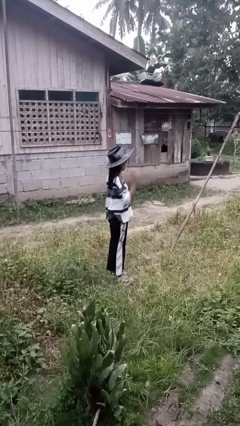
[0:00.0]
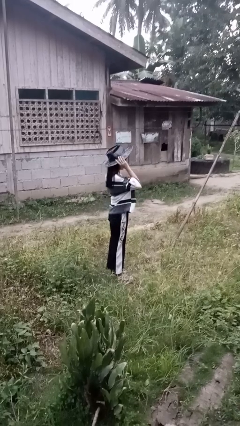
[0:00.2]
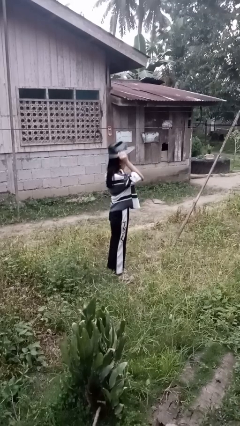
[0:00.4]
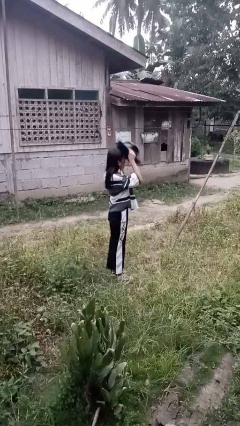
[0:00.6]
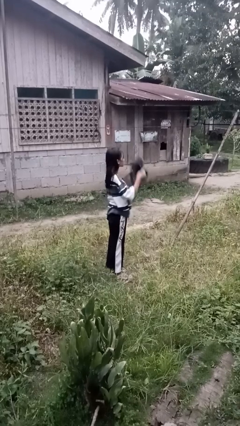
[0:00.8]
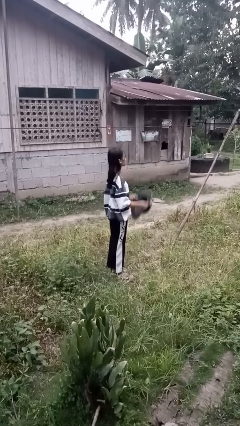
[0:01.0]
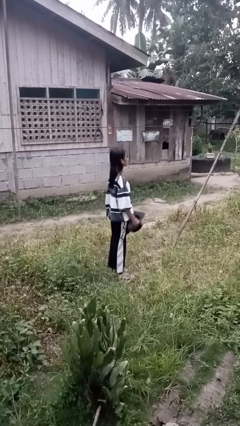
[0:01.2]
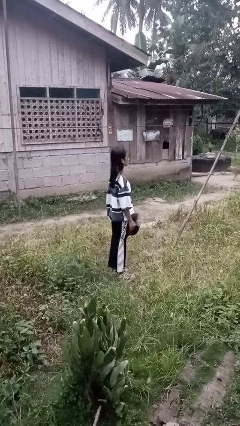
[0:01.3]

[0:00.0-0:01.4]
person takes off hat

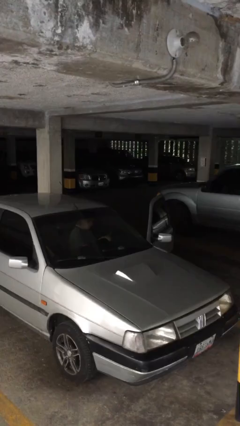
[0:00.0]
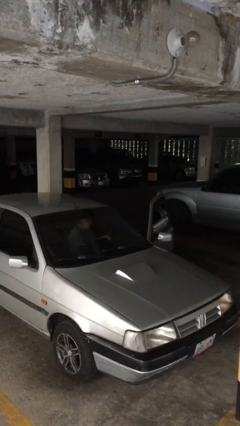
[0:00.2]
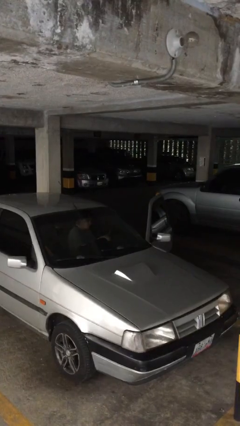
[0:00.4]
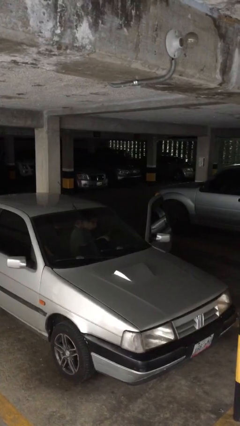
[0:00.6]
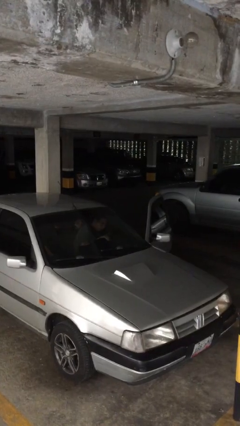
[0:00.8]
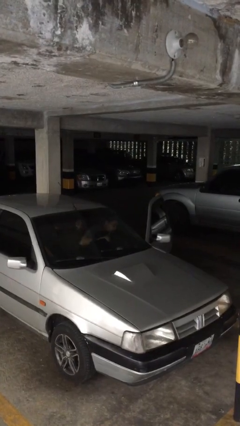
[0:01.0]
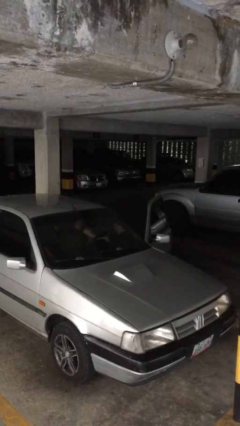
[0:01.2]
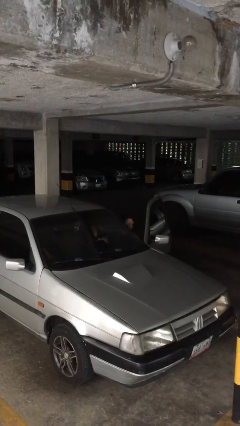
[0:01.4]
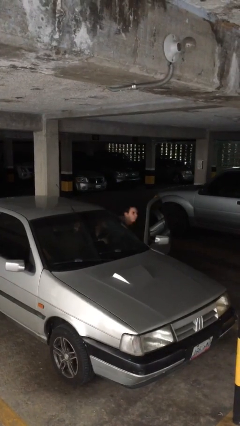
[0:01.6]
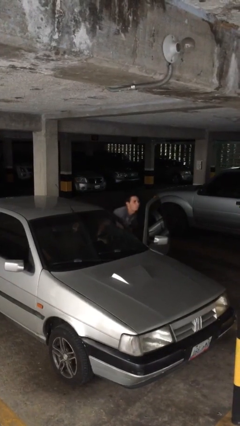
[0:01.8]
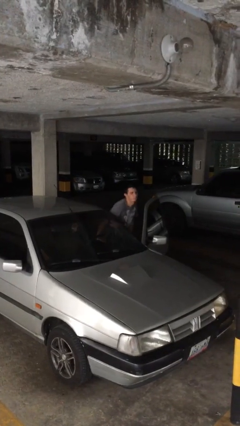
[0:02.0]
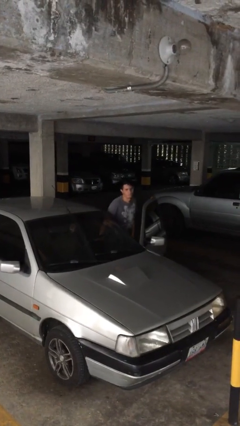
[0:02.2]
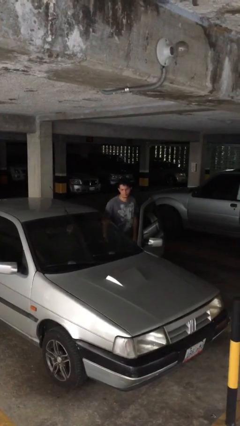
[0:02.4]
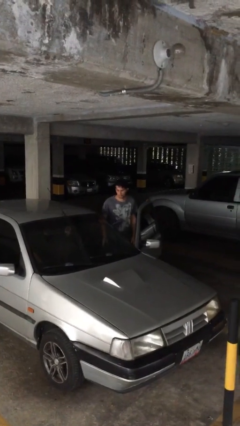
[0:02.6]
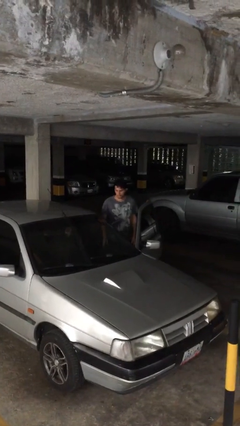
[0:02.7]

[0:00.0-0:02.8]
person exits car

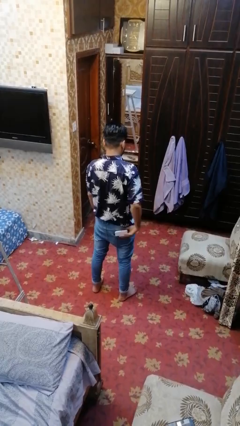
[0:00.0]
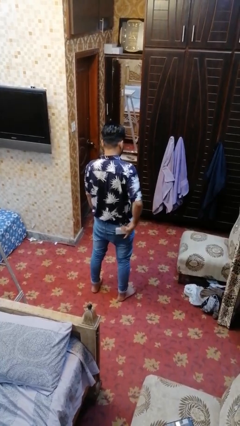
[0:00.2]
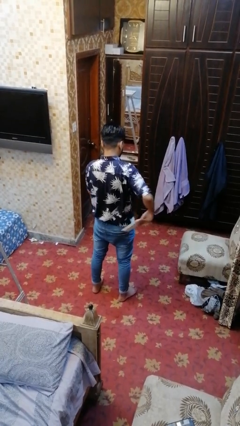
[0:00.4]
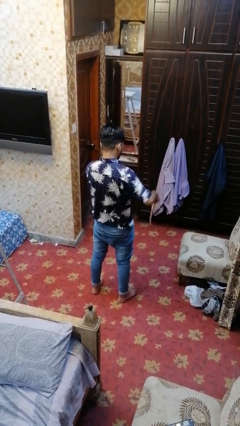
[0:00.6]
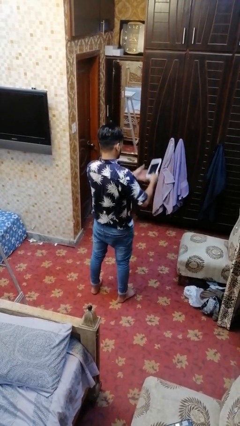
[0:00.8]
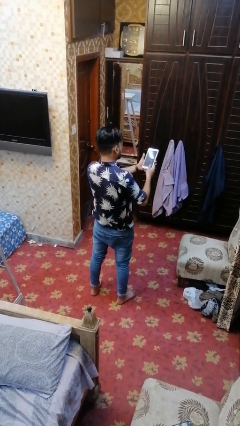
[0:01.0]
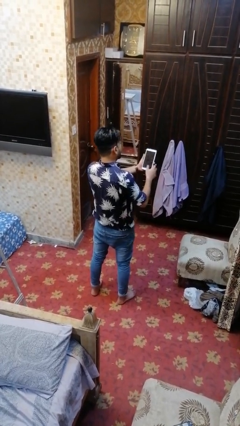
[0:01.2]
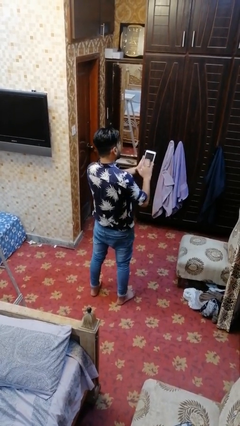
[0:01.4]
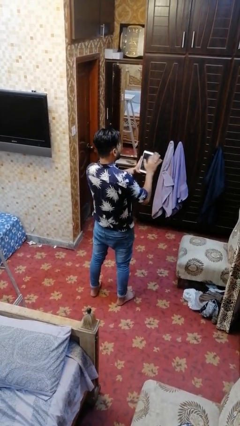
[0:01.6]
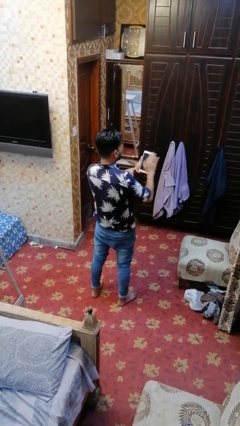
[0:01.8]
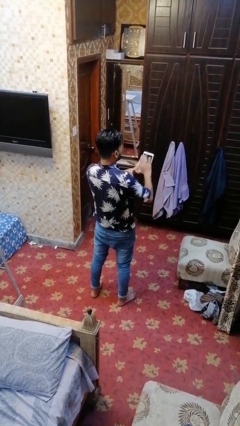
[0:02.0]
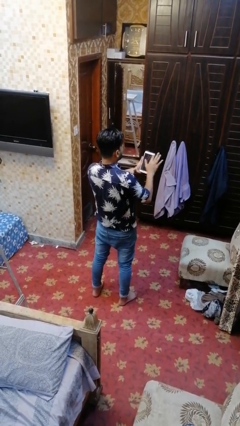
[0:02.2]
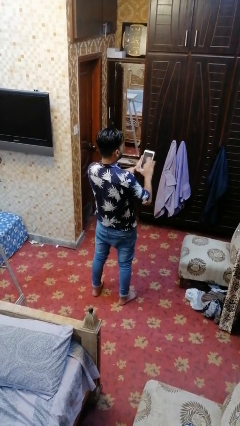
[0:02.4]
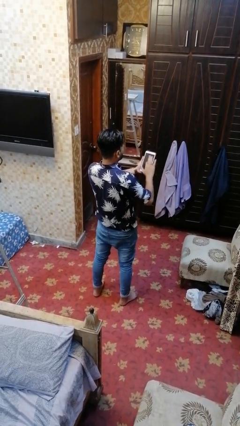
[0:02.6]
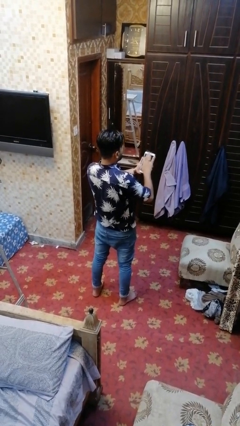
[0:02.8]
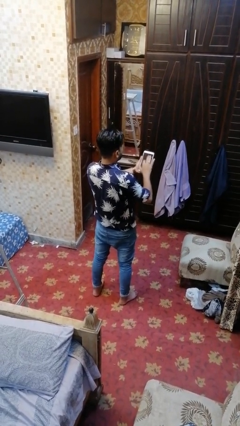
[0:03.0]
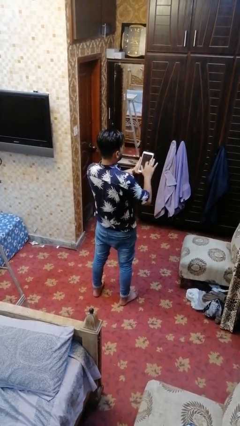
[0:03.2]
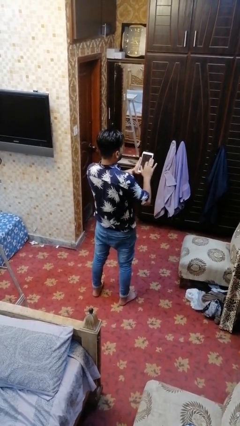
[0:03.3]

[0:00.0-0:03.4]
person takes phone from pocket

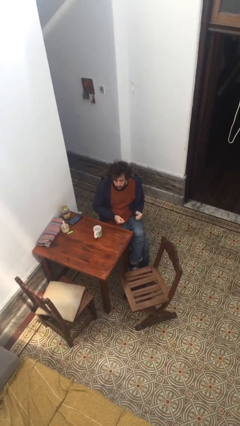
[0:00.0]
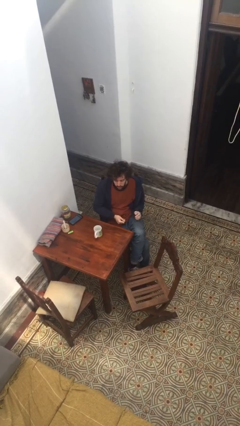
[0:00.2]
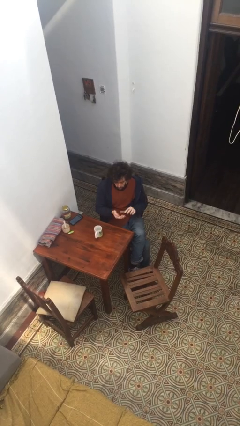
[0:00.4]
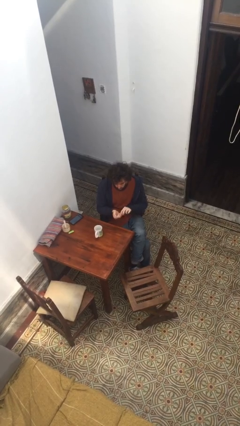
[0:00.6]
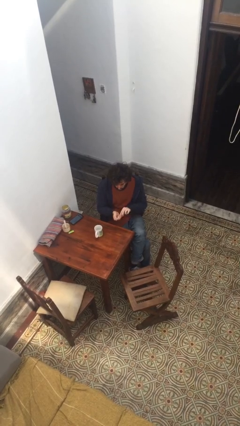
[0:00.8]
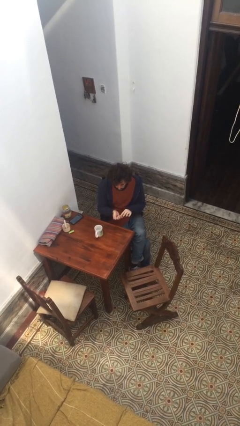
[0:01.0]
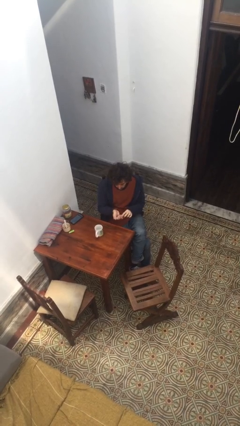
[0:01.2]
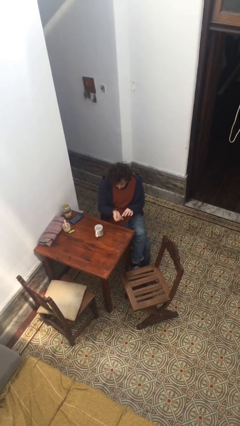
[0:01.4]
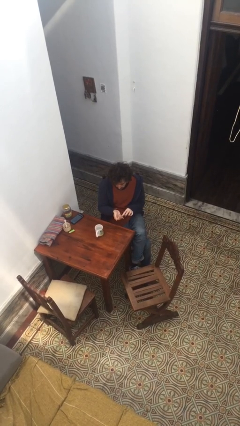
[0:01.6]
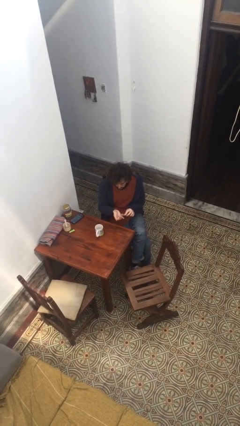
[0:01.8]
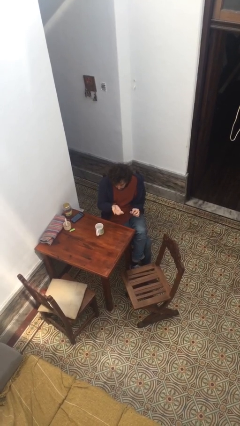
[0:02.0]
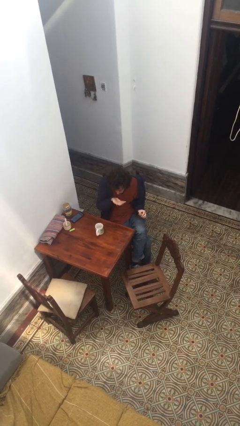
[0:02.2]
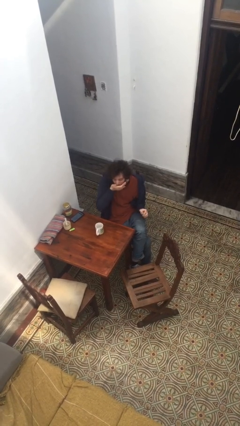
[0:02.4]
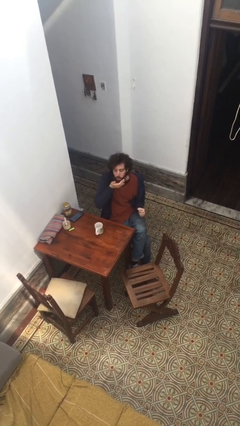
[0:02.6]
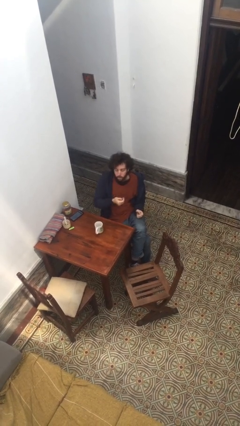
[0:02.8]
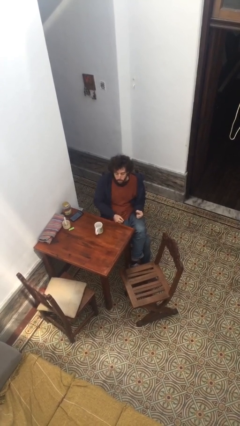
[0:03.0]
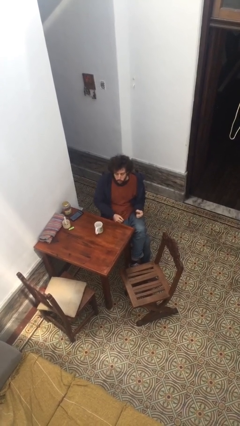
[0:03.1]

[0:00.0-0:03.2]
person takes medicine pills

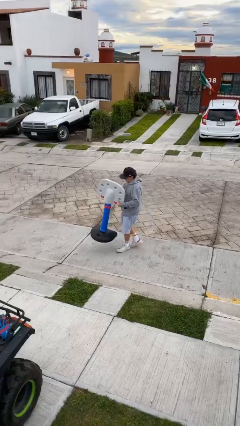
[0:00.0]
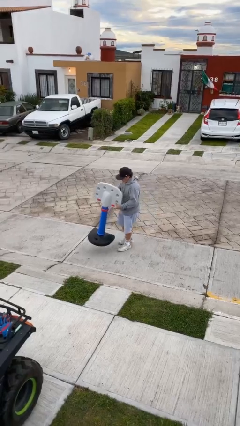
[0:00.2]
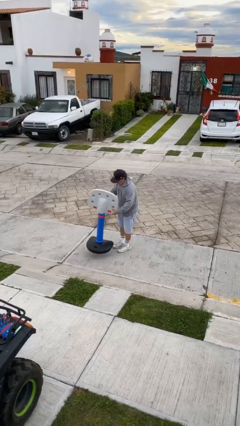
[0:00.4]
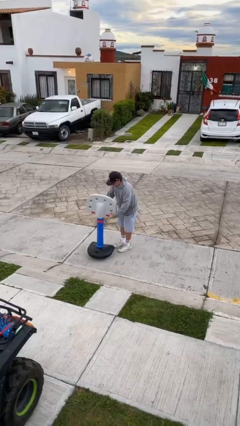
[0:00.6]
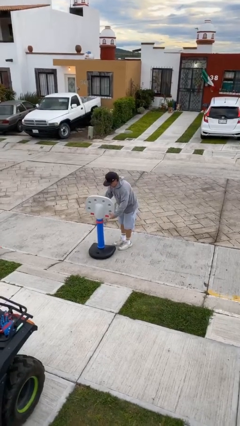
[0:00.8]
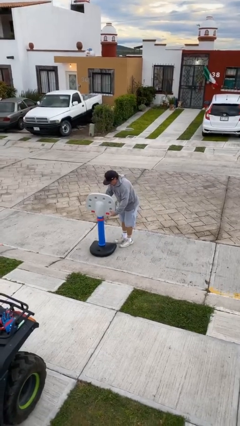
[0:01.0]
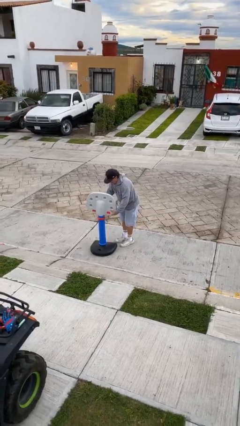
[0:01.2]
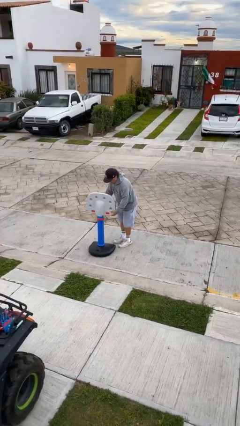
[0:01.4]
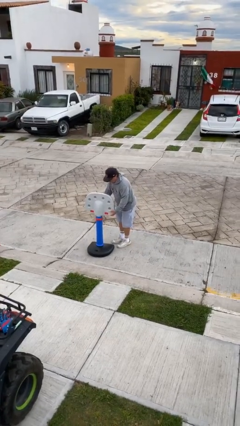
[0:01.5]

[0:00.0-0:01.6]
person puts down object on floor

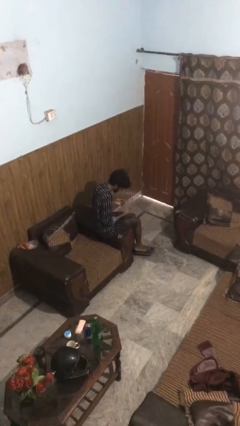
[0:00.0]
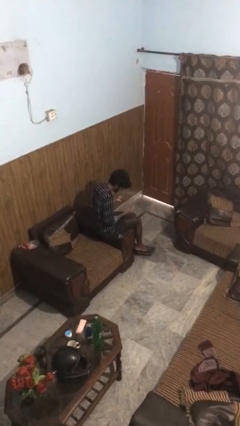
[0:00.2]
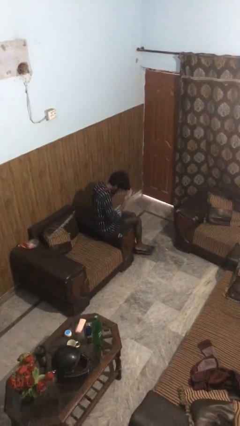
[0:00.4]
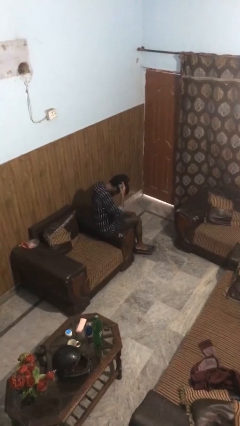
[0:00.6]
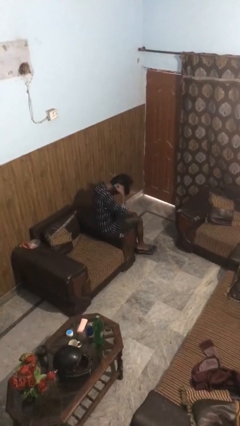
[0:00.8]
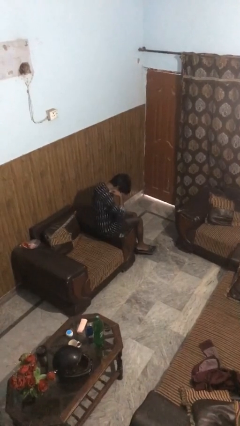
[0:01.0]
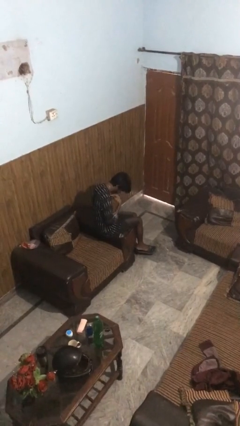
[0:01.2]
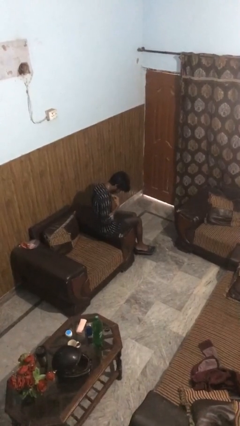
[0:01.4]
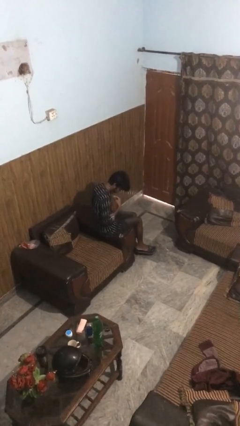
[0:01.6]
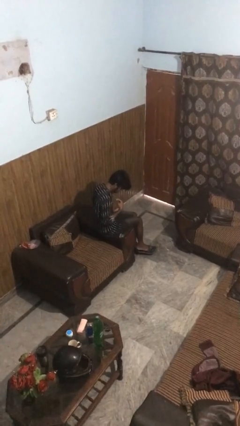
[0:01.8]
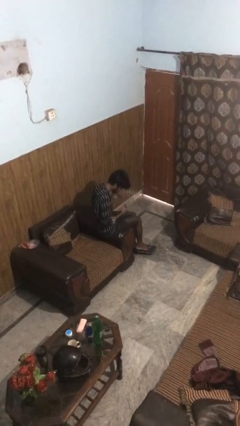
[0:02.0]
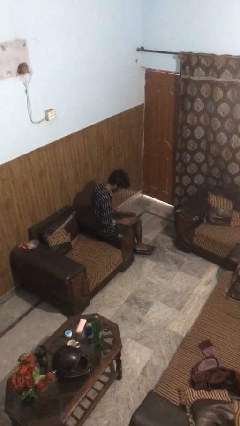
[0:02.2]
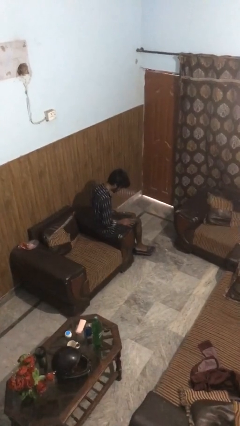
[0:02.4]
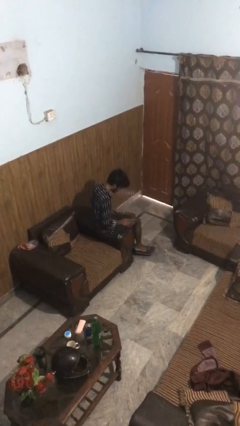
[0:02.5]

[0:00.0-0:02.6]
person puts on necklace

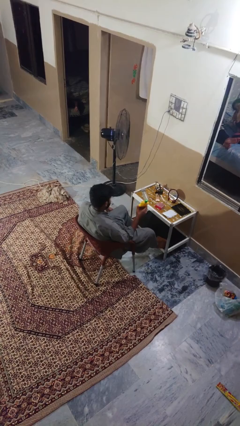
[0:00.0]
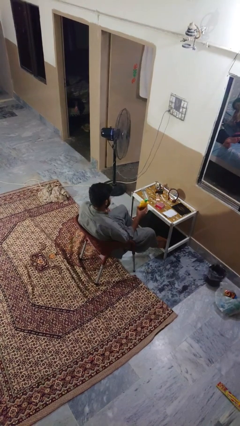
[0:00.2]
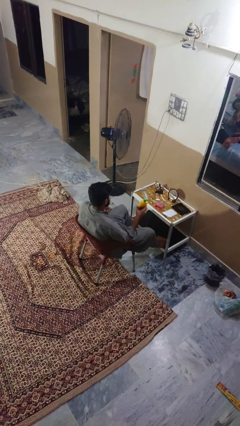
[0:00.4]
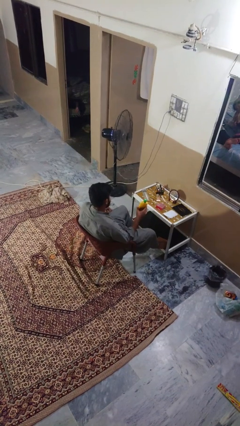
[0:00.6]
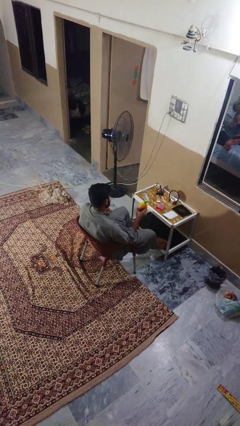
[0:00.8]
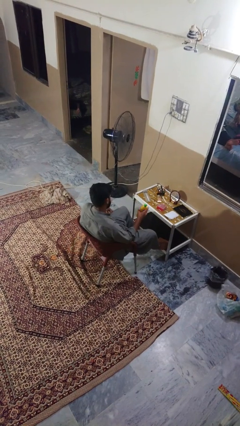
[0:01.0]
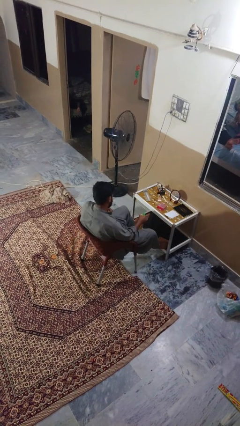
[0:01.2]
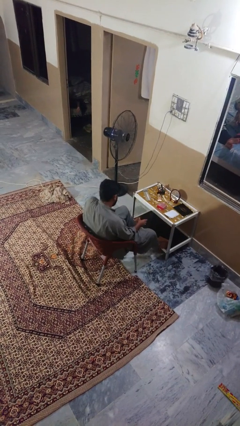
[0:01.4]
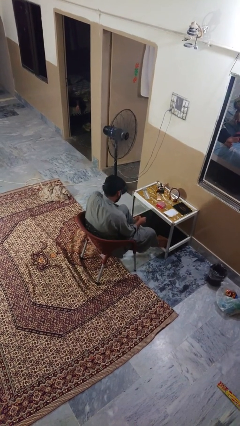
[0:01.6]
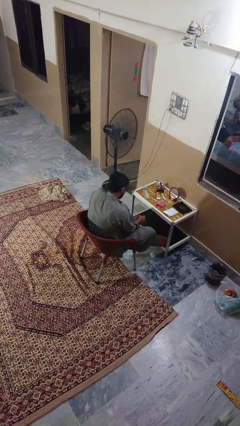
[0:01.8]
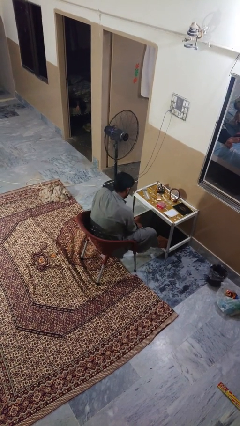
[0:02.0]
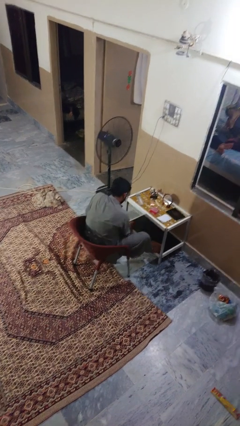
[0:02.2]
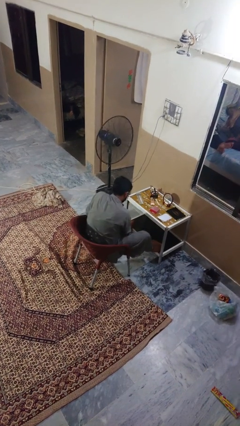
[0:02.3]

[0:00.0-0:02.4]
person throws object to ground
